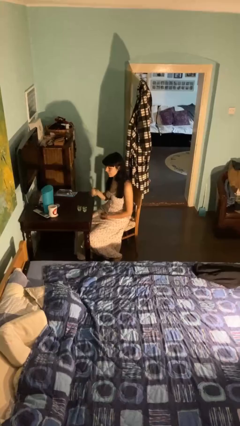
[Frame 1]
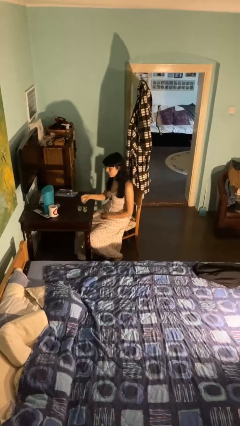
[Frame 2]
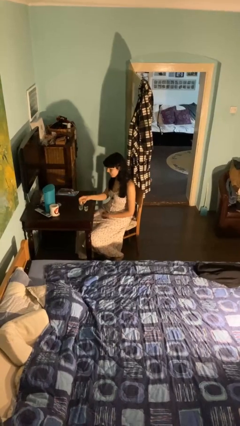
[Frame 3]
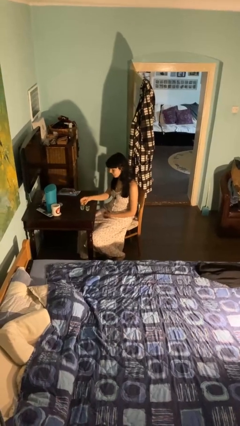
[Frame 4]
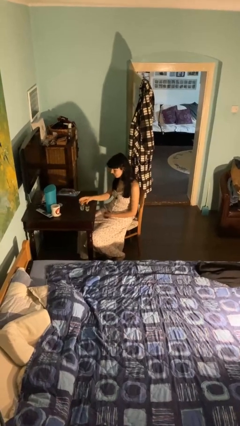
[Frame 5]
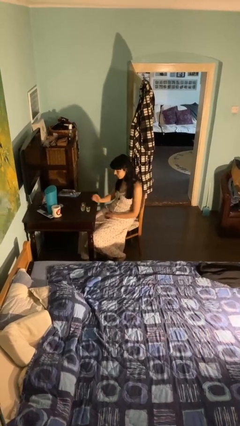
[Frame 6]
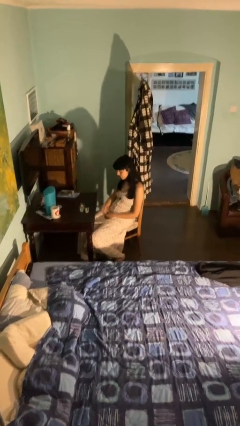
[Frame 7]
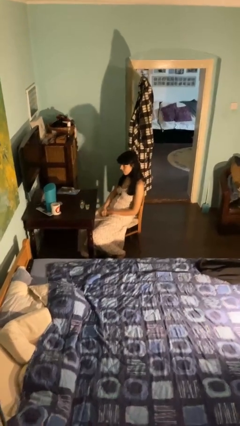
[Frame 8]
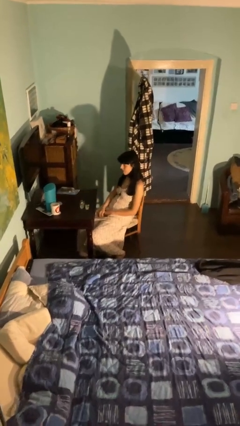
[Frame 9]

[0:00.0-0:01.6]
person puts down object on table

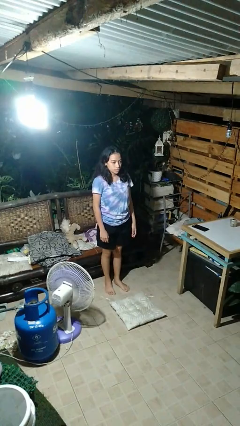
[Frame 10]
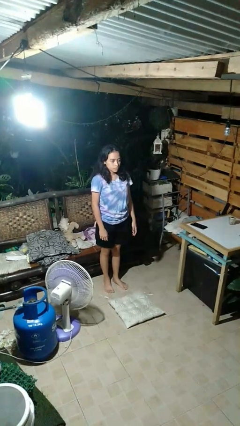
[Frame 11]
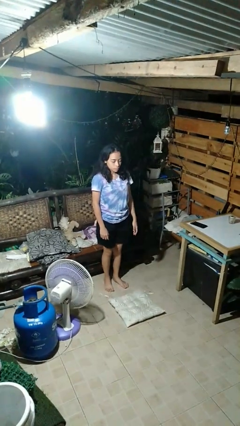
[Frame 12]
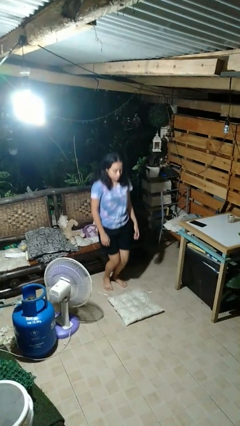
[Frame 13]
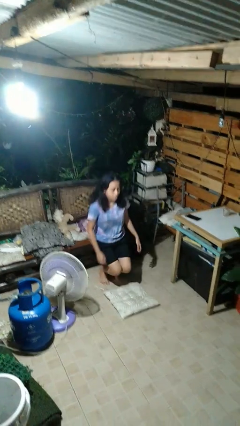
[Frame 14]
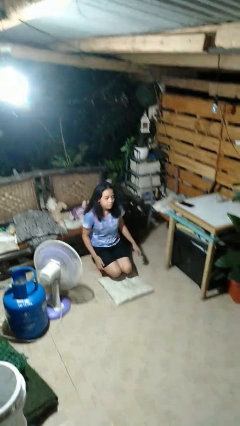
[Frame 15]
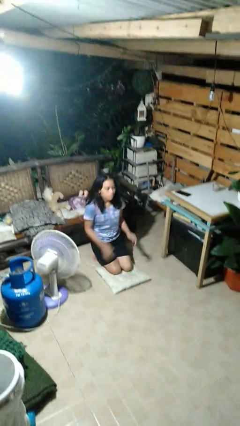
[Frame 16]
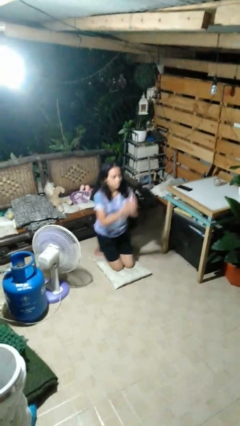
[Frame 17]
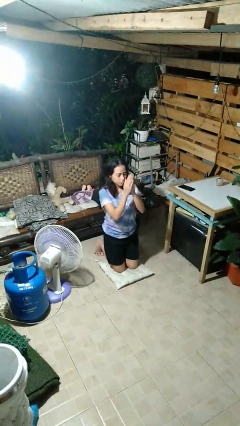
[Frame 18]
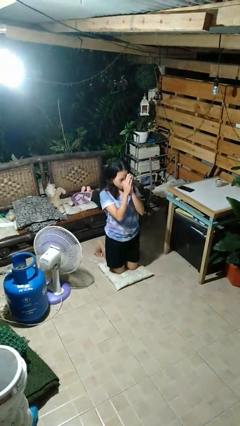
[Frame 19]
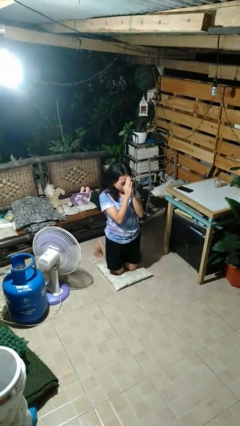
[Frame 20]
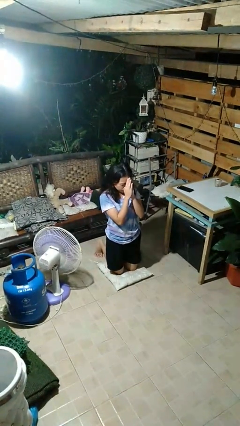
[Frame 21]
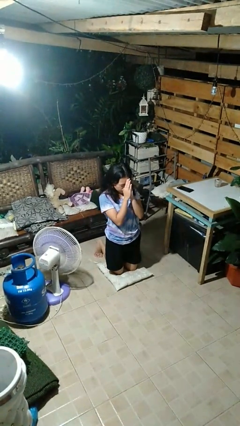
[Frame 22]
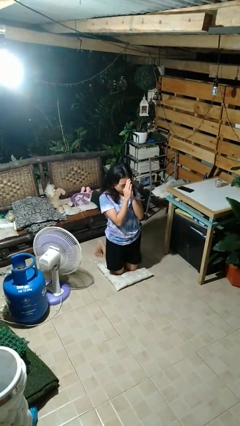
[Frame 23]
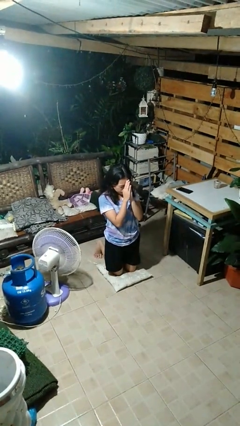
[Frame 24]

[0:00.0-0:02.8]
person prays

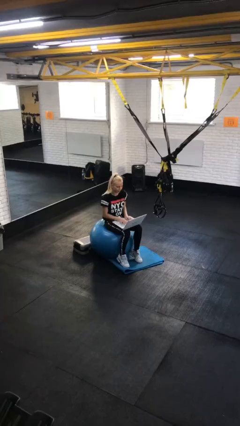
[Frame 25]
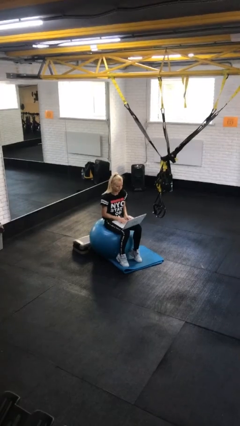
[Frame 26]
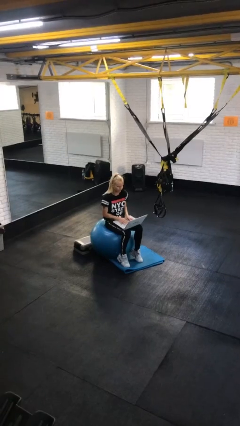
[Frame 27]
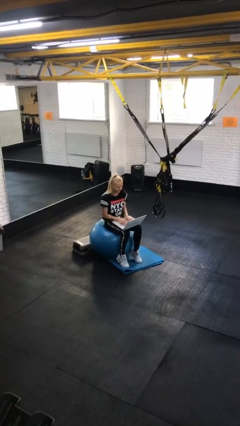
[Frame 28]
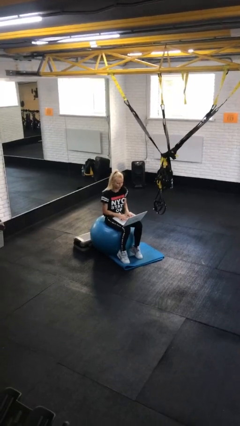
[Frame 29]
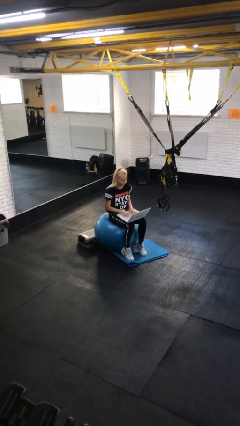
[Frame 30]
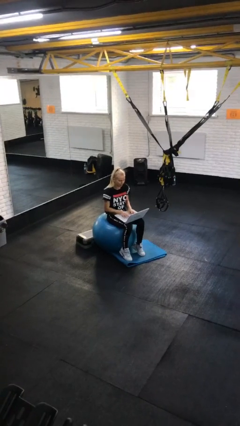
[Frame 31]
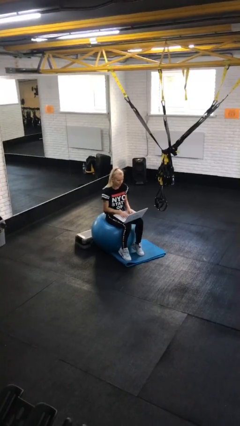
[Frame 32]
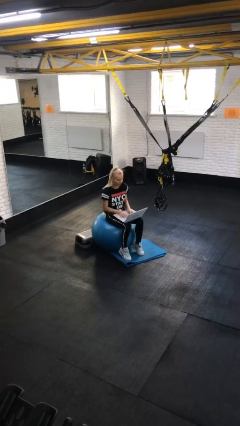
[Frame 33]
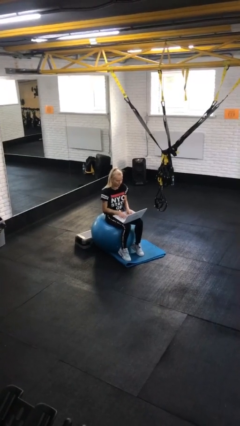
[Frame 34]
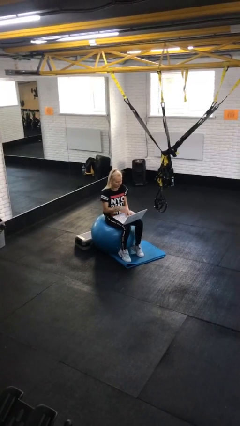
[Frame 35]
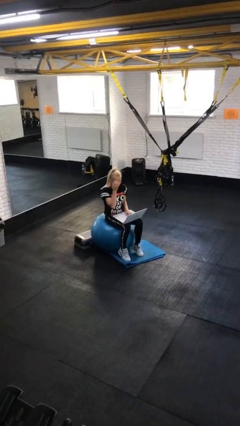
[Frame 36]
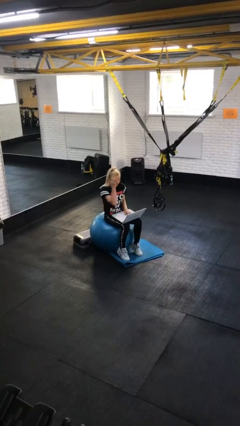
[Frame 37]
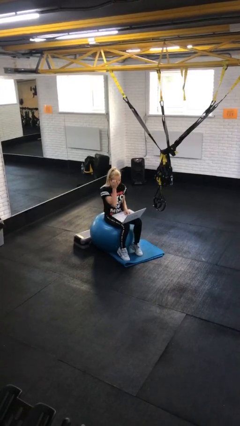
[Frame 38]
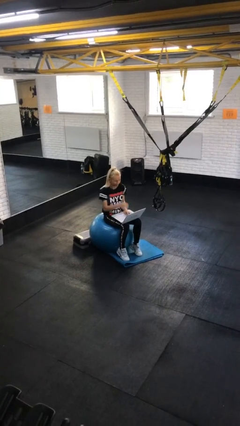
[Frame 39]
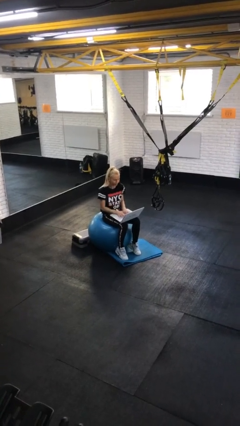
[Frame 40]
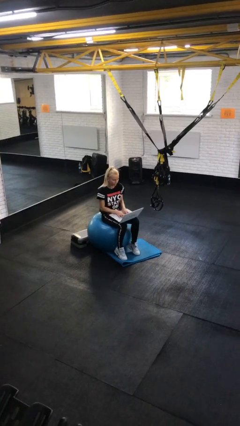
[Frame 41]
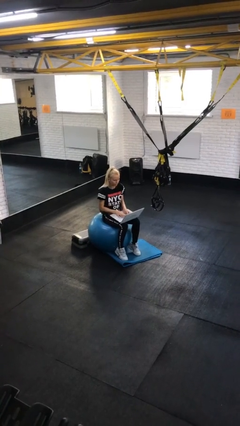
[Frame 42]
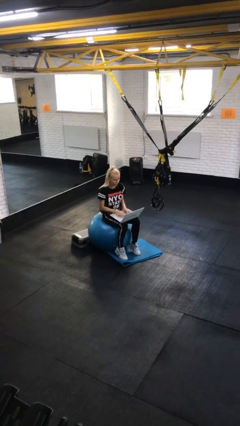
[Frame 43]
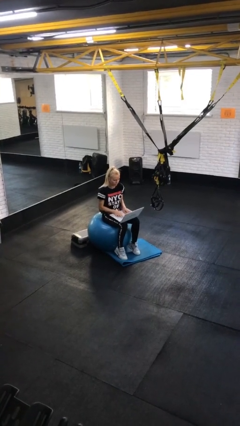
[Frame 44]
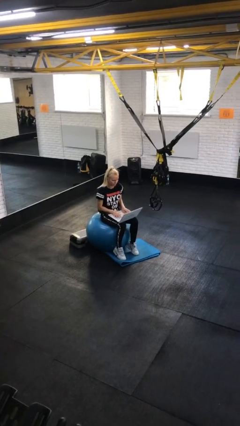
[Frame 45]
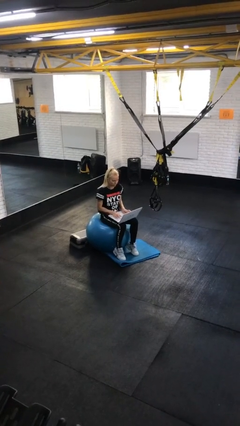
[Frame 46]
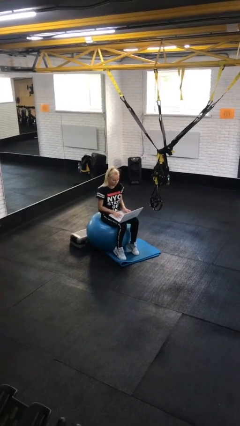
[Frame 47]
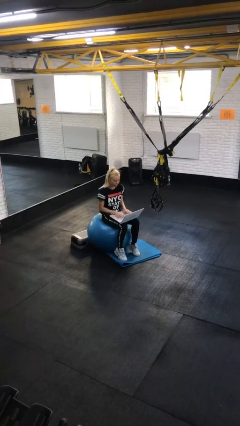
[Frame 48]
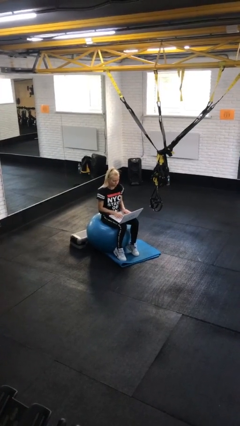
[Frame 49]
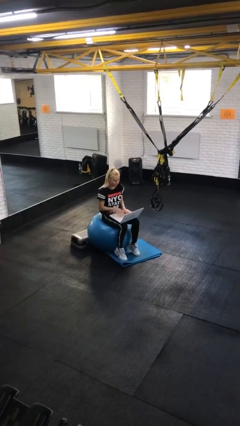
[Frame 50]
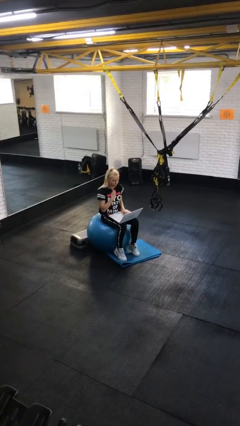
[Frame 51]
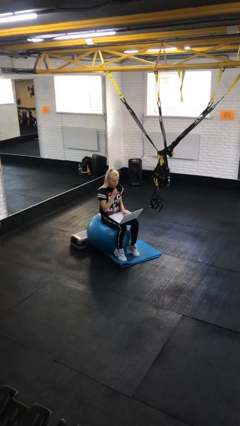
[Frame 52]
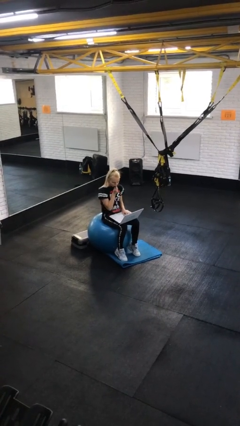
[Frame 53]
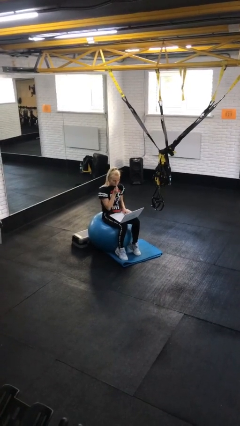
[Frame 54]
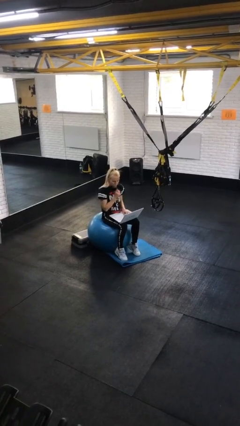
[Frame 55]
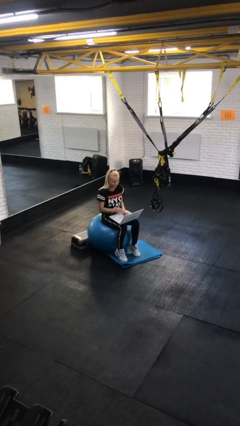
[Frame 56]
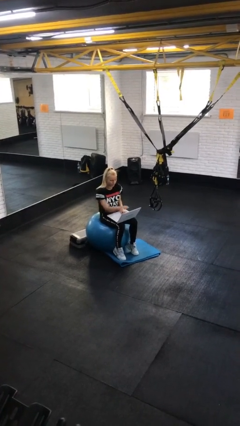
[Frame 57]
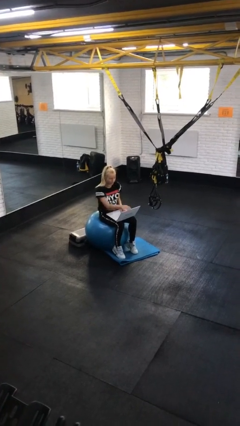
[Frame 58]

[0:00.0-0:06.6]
person interacts with laptop

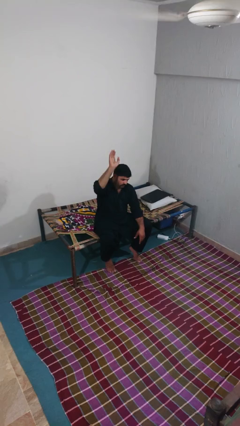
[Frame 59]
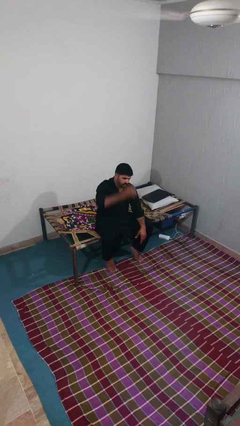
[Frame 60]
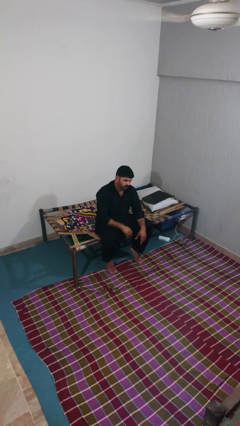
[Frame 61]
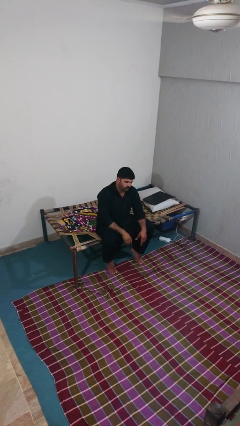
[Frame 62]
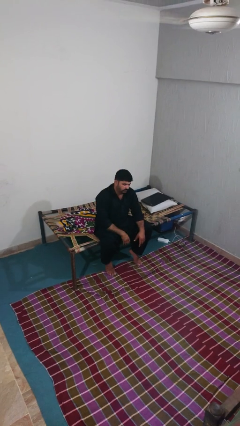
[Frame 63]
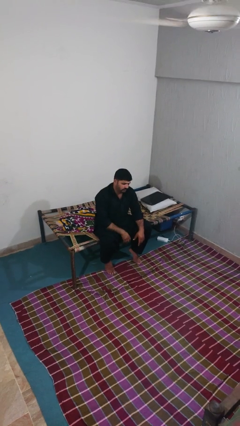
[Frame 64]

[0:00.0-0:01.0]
person gestures lower hand

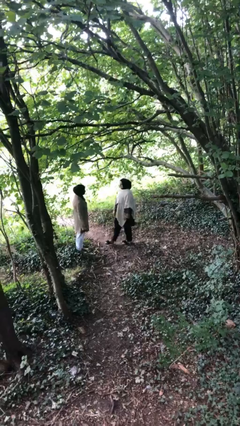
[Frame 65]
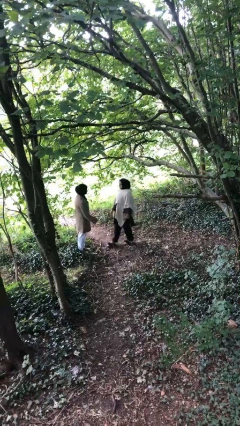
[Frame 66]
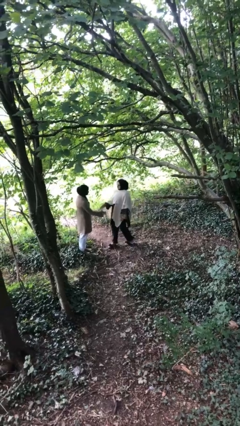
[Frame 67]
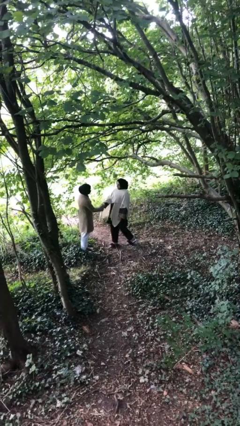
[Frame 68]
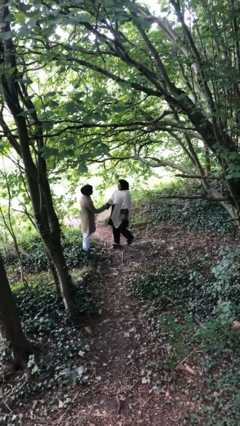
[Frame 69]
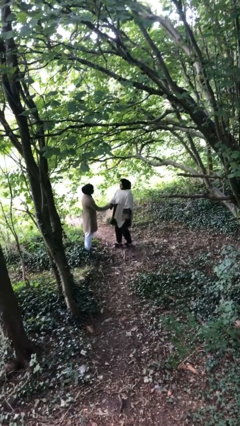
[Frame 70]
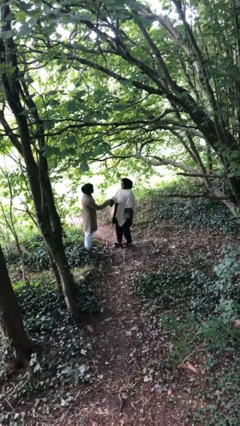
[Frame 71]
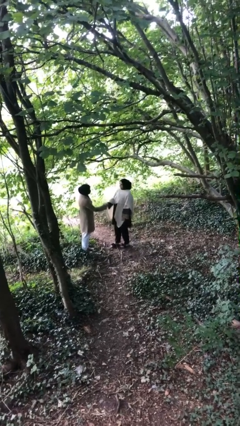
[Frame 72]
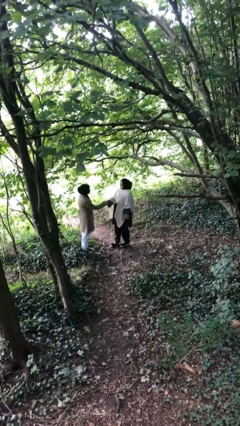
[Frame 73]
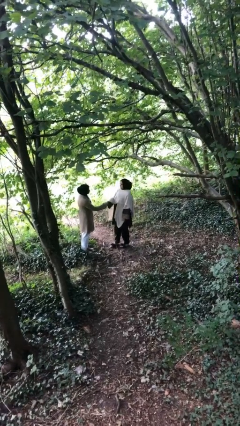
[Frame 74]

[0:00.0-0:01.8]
person shakes hand

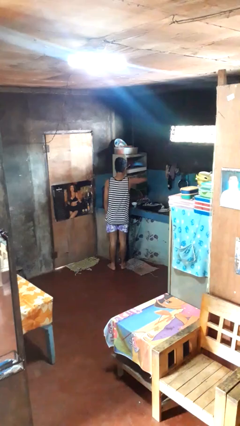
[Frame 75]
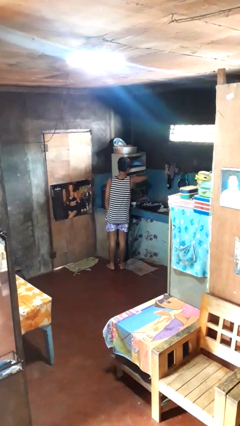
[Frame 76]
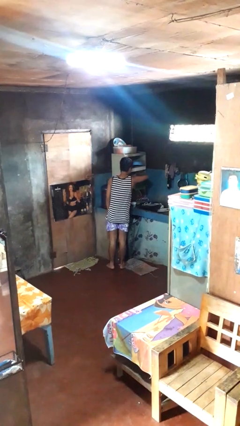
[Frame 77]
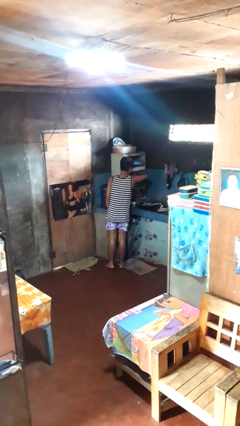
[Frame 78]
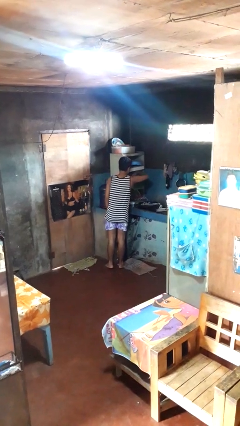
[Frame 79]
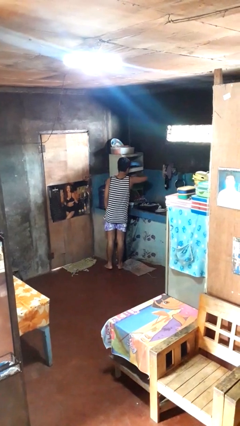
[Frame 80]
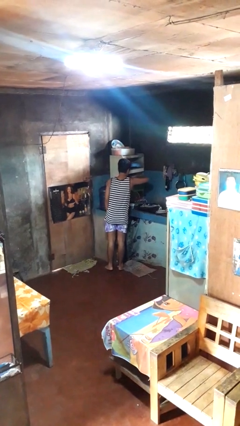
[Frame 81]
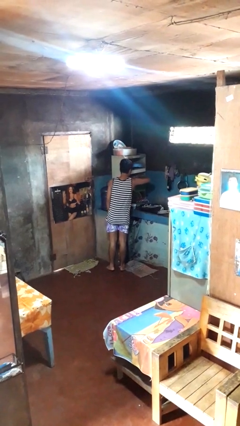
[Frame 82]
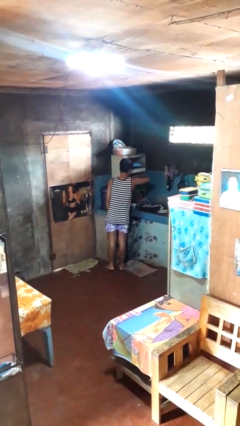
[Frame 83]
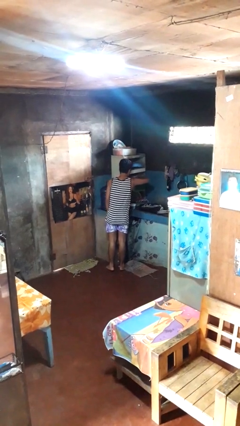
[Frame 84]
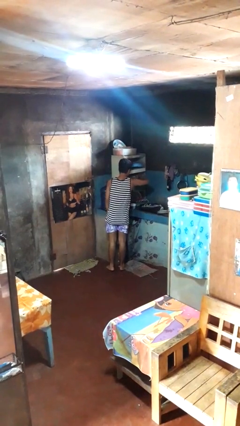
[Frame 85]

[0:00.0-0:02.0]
person searches in kitchen drawer

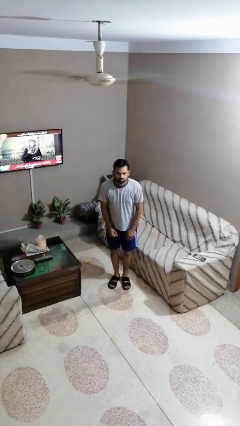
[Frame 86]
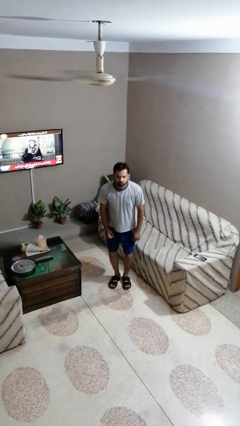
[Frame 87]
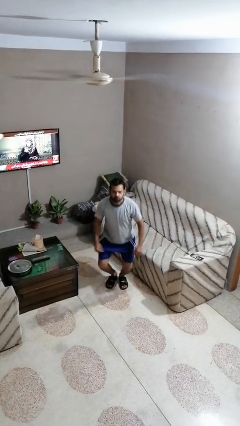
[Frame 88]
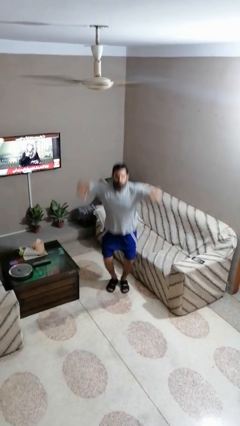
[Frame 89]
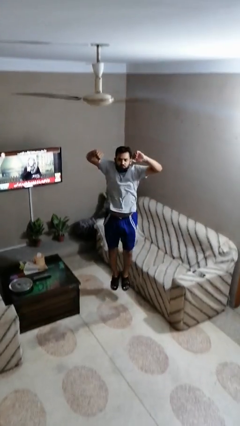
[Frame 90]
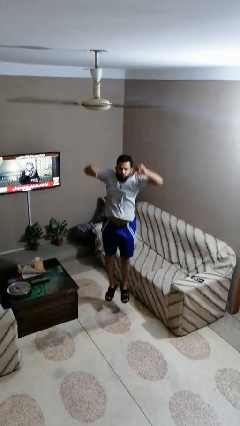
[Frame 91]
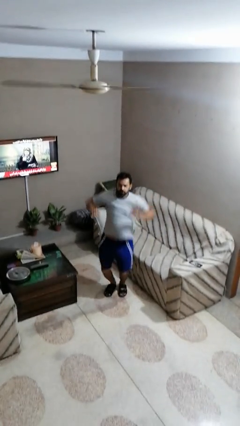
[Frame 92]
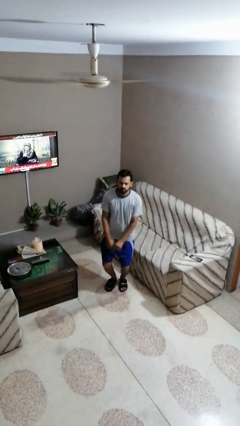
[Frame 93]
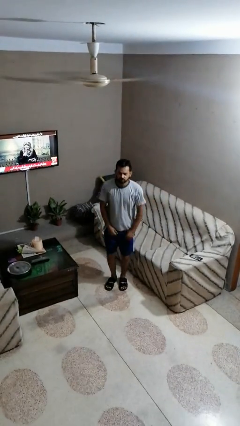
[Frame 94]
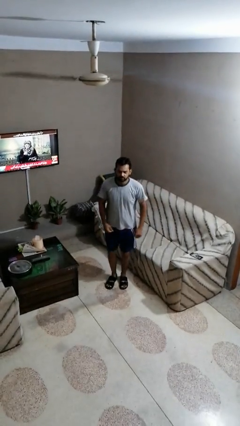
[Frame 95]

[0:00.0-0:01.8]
person jumps
